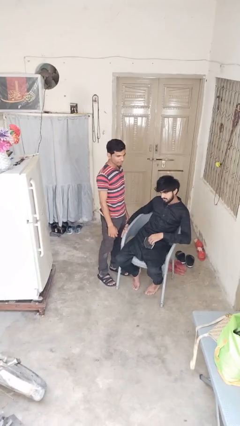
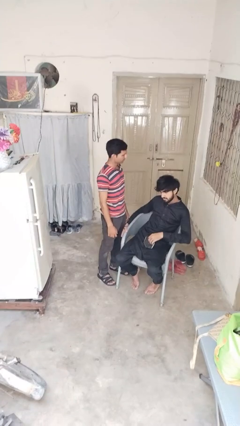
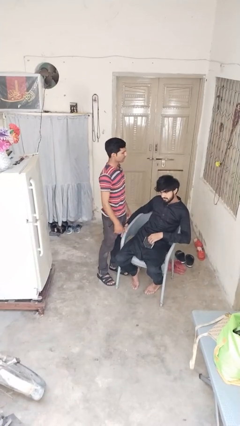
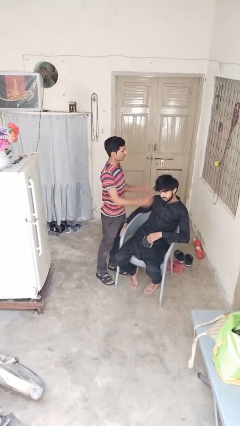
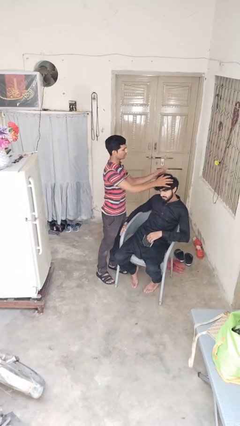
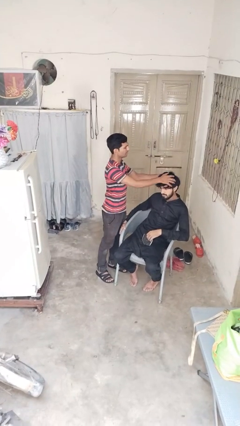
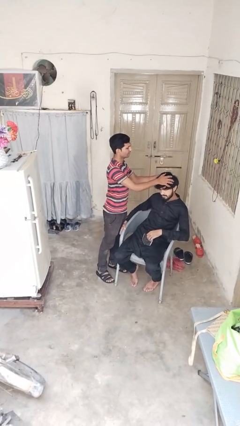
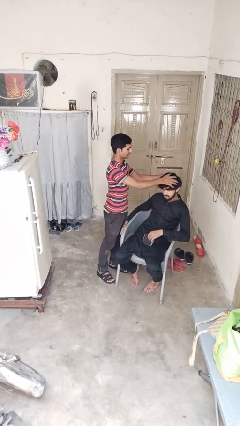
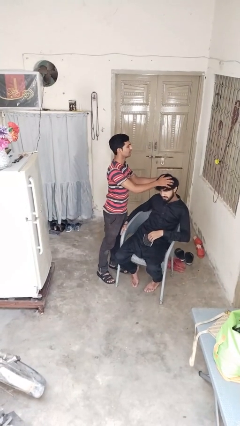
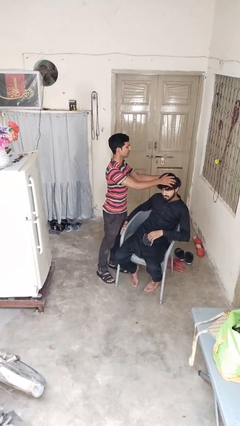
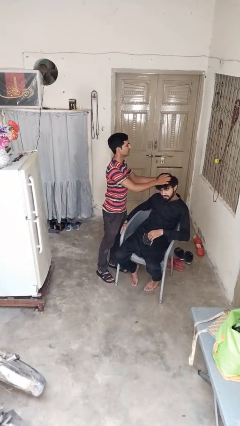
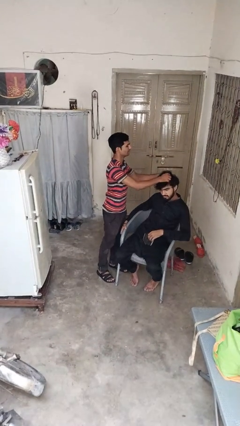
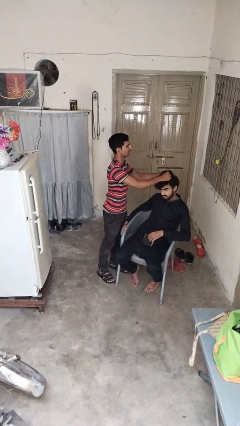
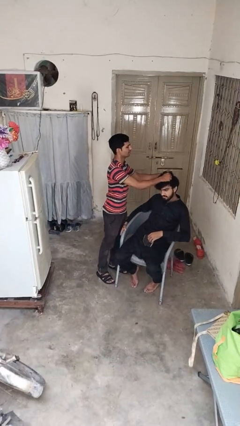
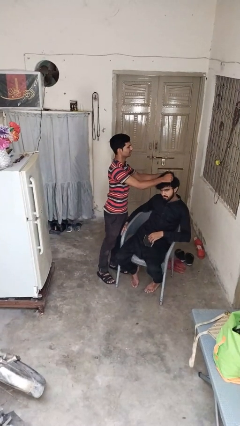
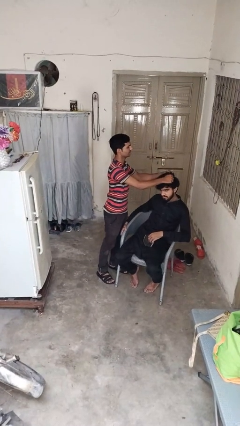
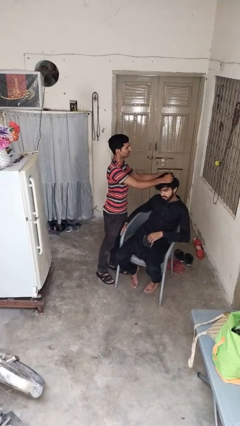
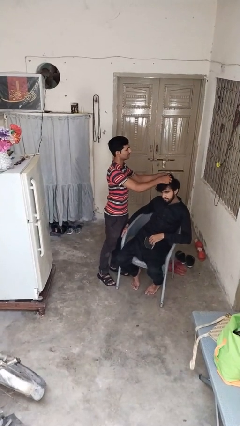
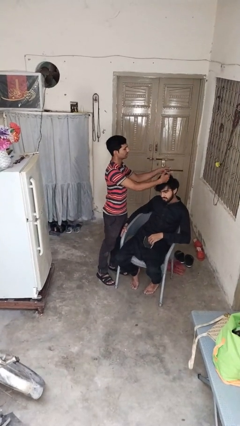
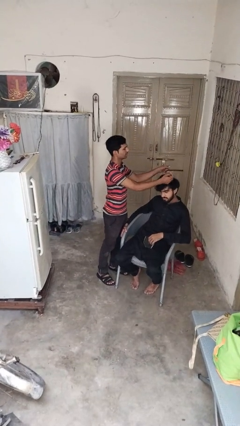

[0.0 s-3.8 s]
person grabs person by hair

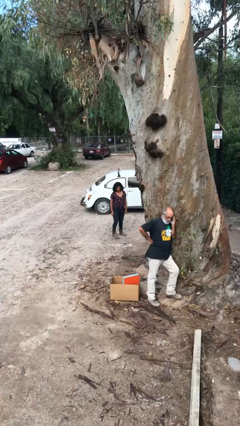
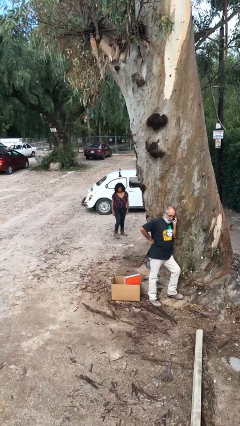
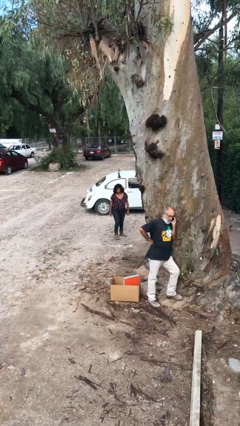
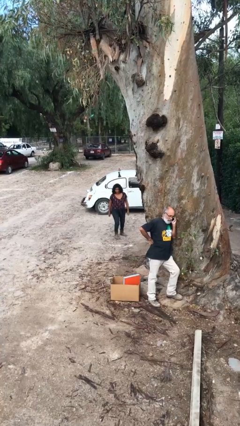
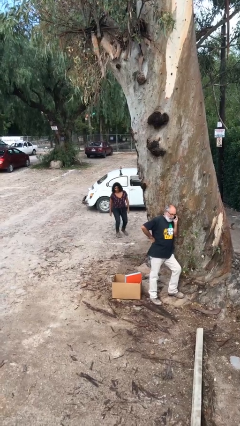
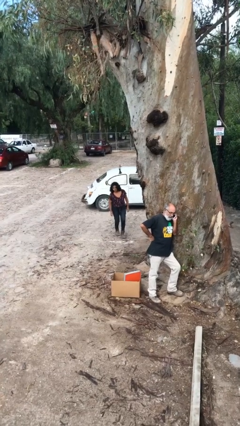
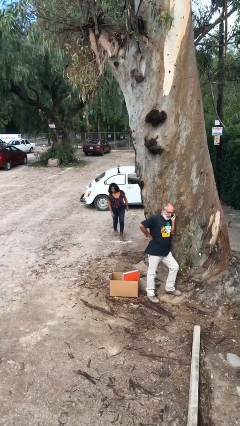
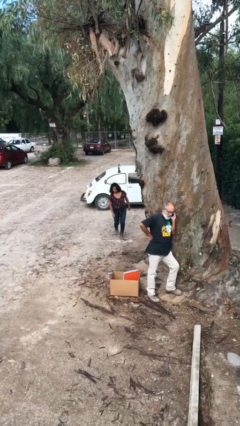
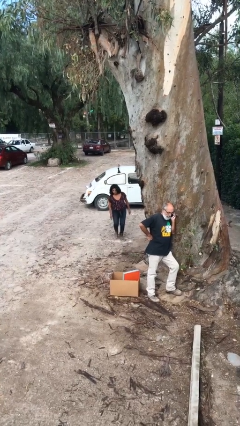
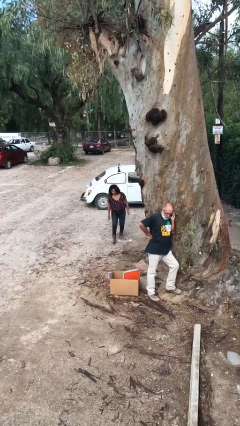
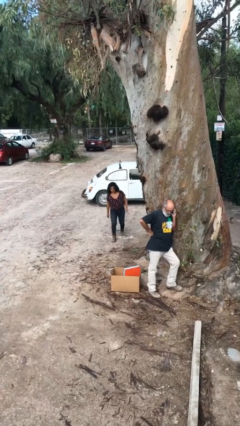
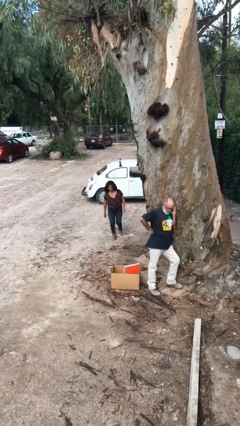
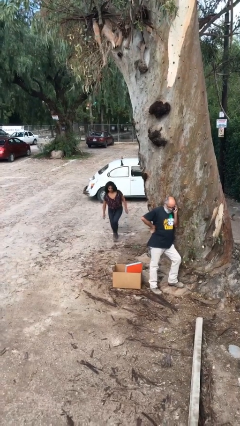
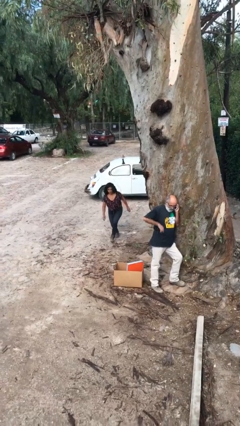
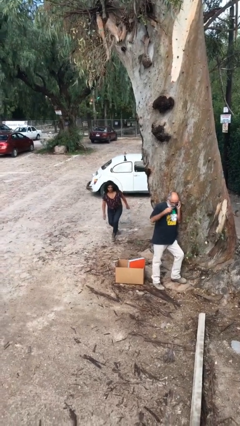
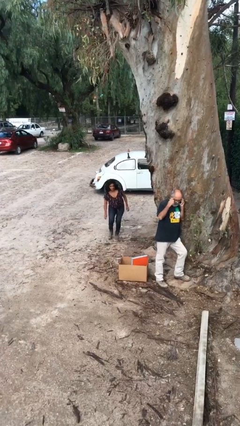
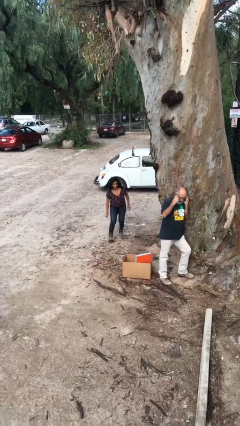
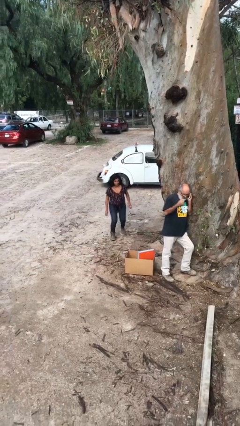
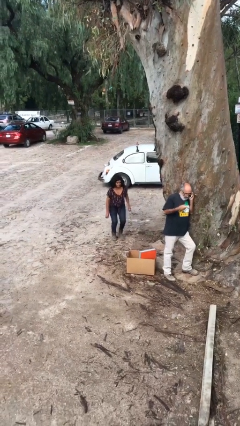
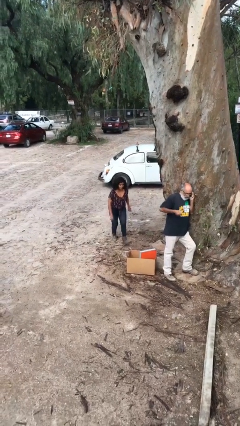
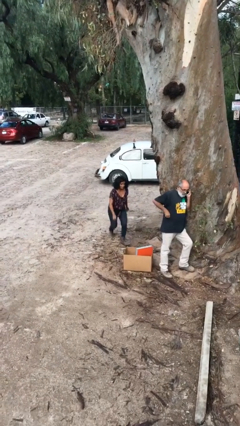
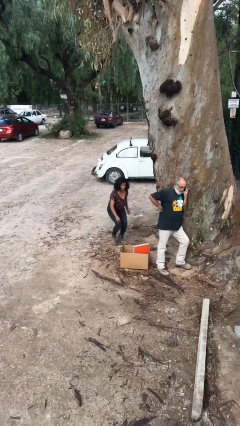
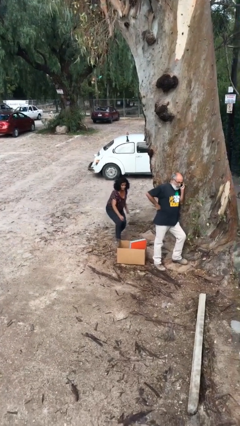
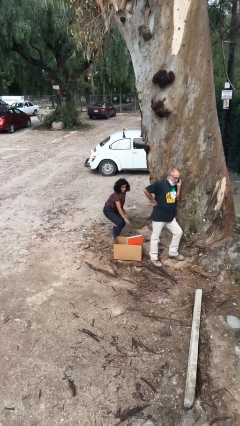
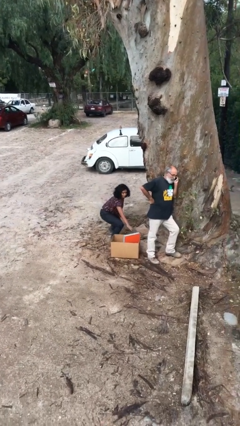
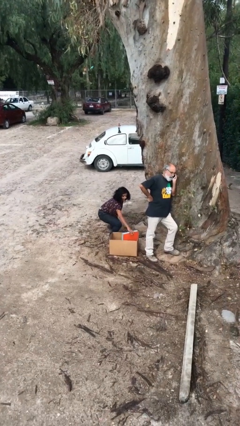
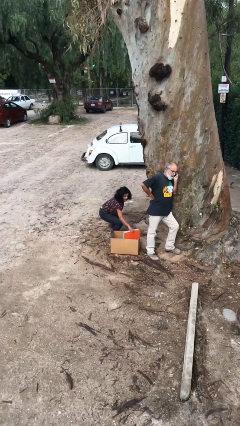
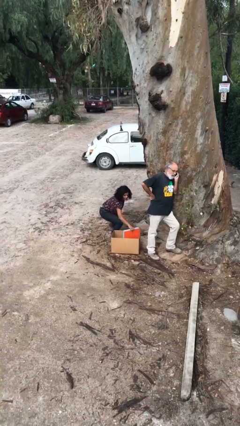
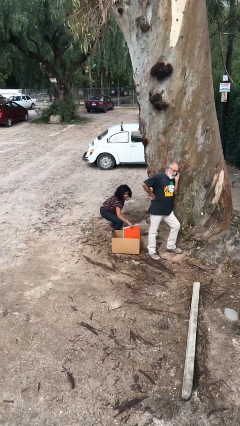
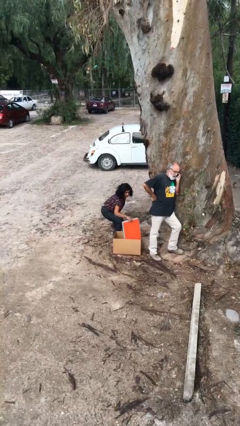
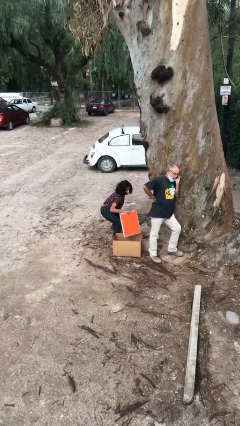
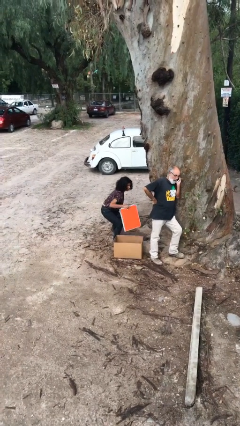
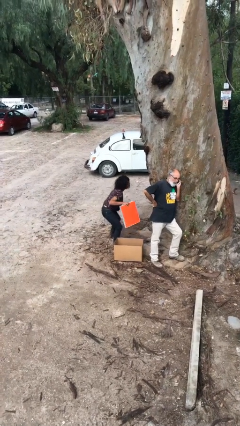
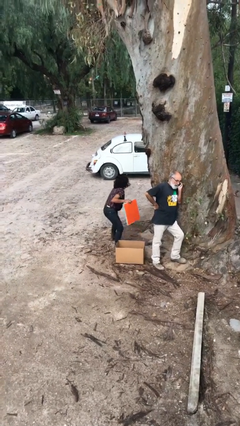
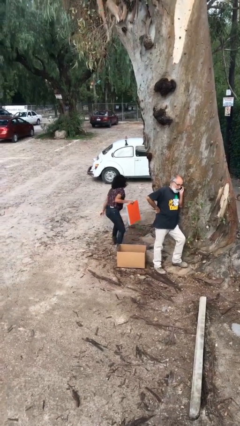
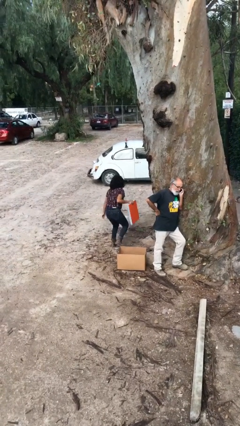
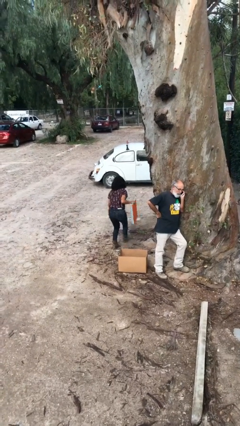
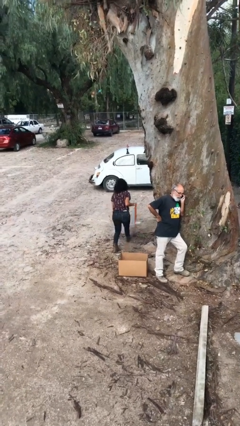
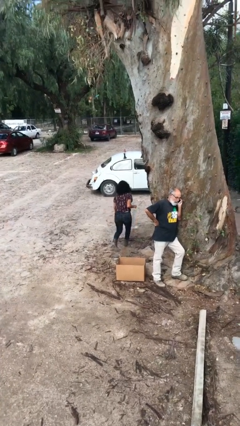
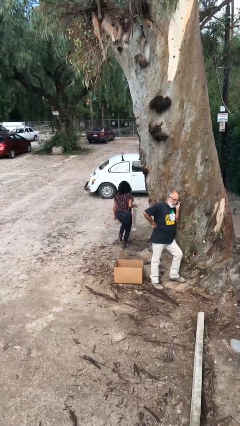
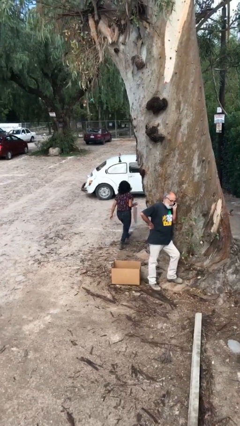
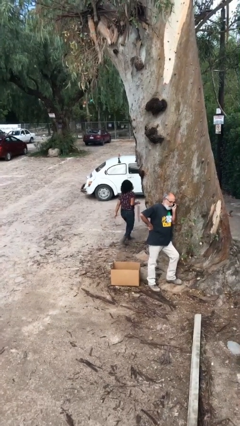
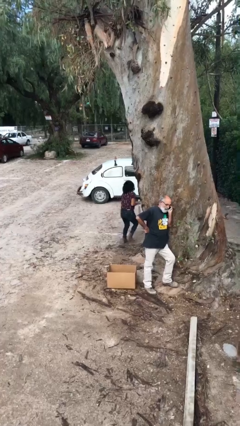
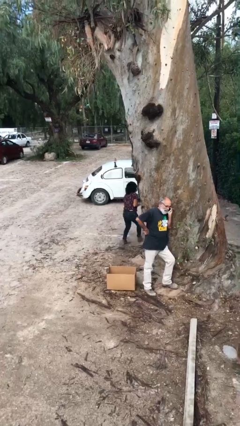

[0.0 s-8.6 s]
person steals object from person

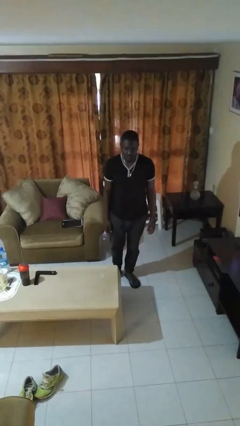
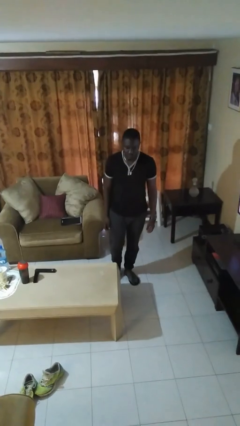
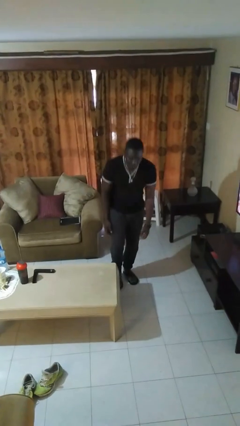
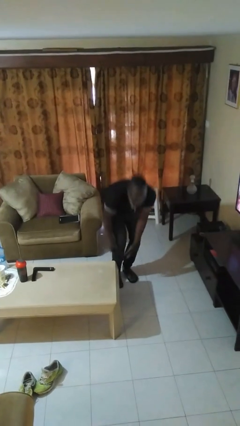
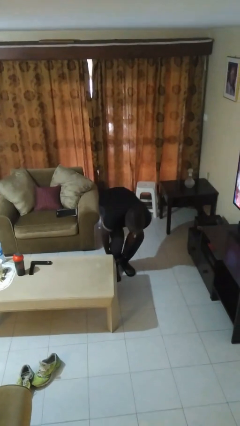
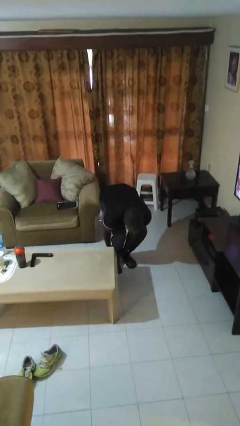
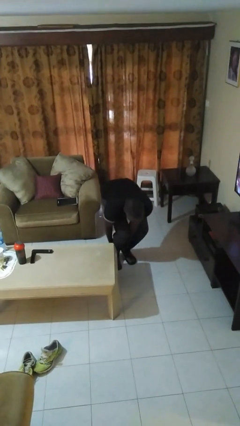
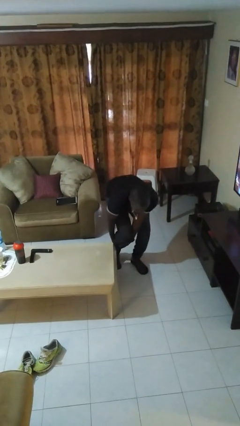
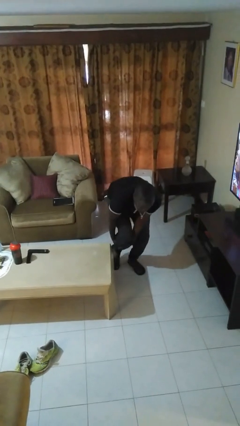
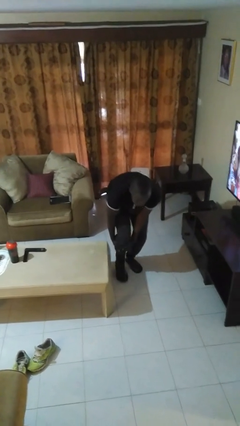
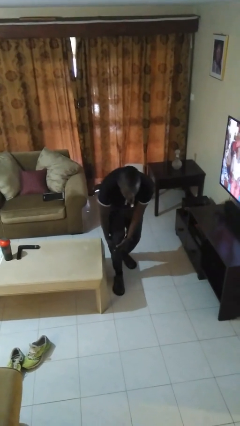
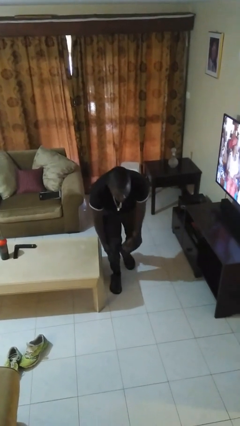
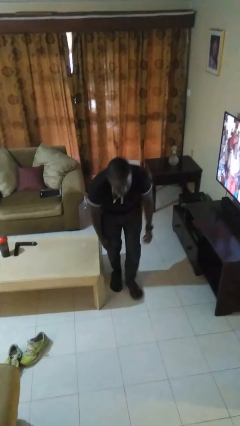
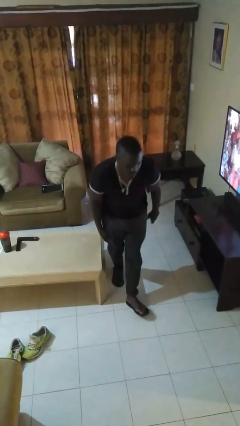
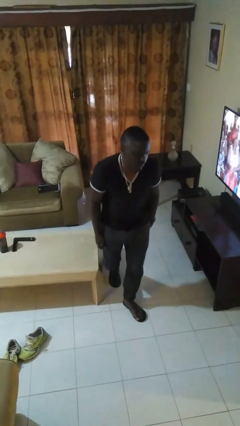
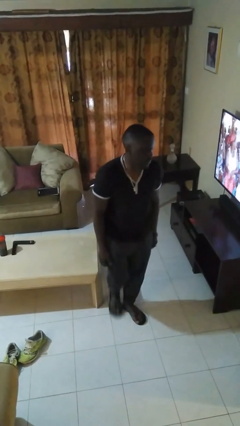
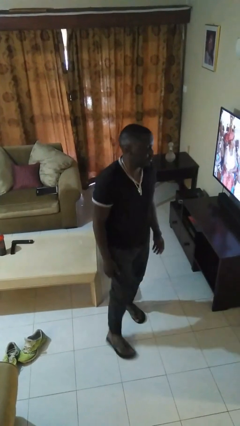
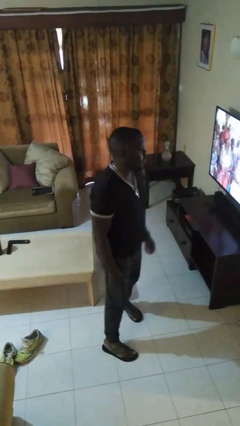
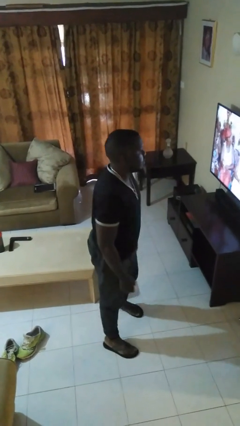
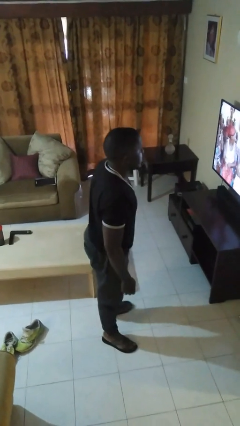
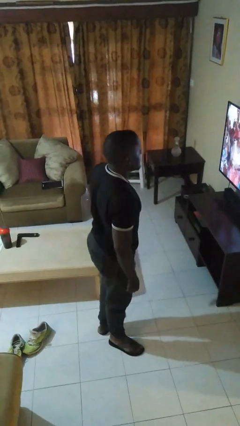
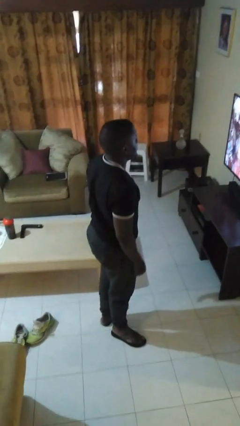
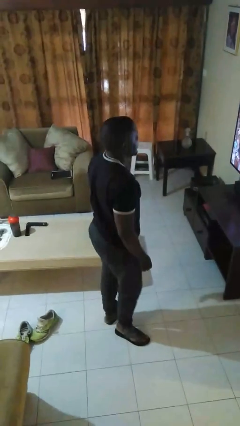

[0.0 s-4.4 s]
person bumps into table

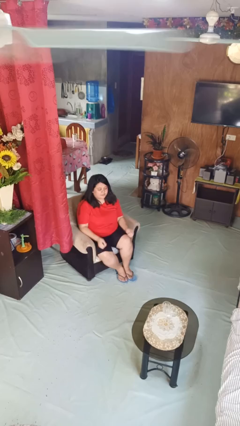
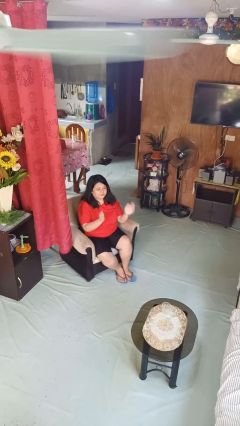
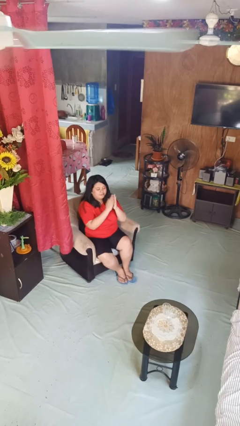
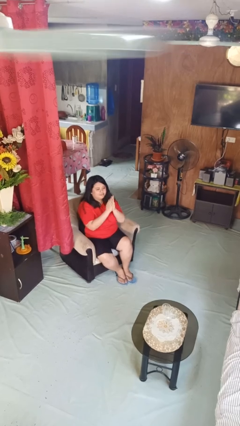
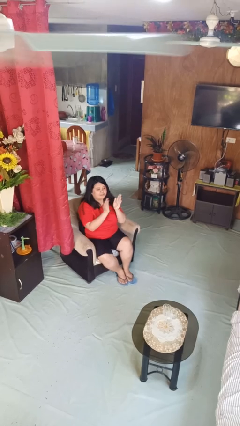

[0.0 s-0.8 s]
person claps hands
